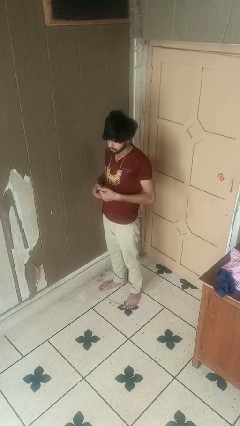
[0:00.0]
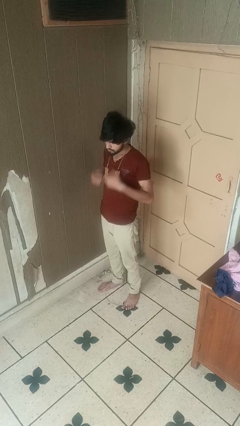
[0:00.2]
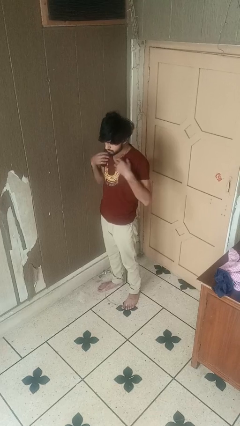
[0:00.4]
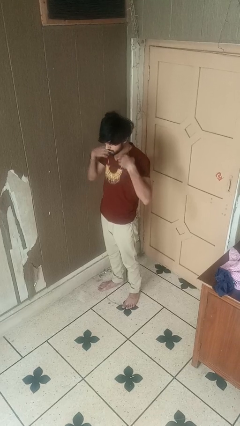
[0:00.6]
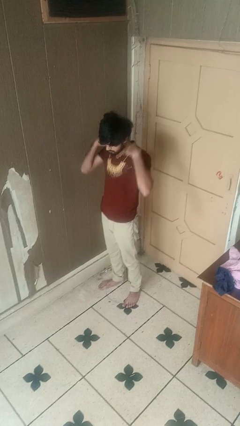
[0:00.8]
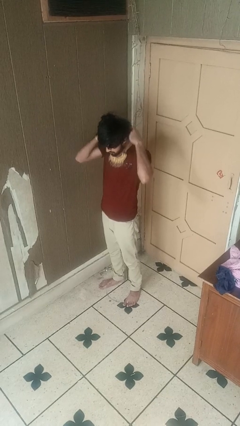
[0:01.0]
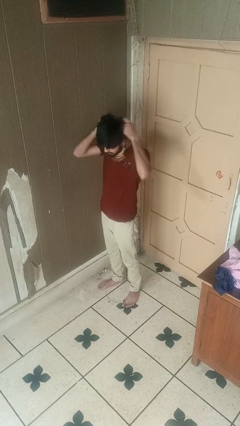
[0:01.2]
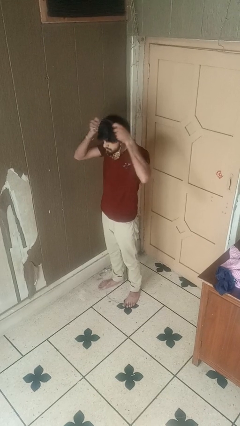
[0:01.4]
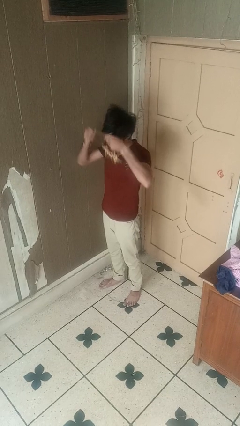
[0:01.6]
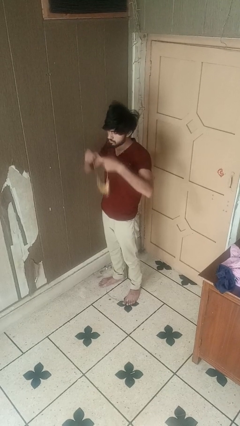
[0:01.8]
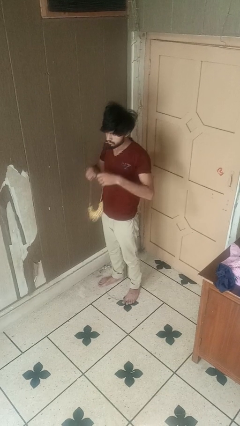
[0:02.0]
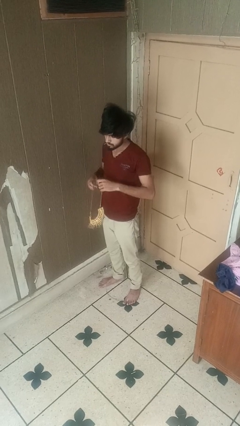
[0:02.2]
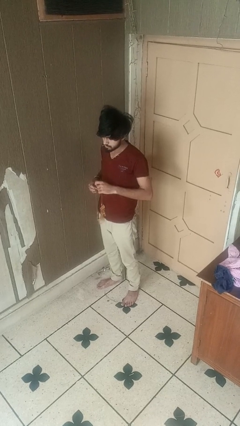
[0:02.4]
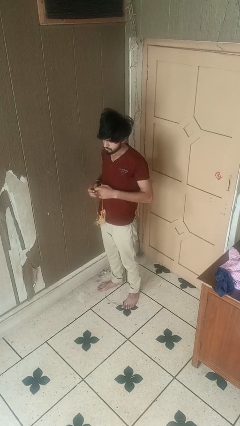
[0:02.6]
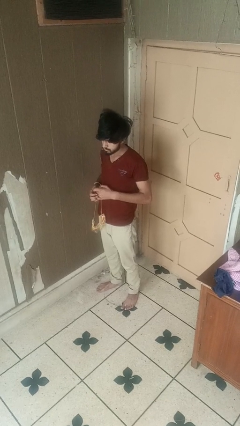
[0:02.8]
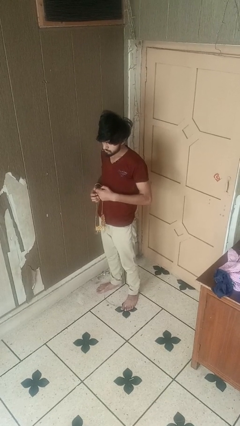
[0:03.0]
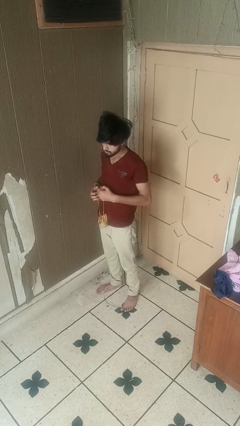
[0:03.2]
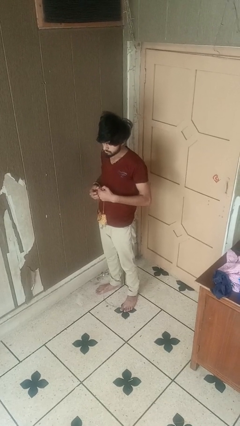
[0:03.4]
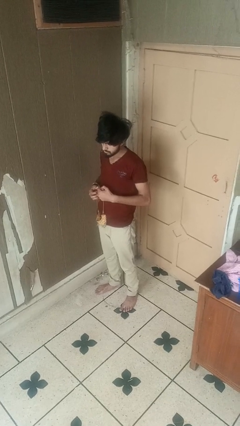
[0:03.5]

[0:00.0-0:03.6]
person takes off necklace

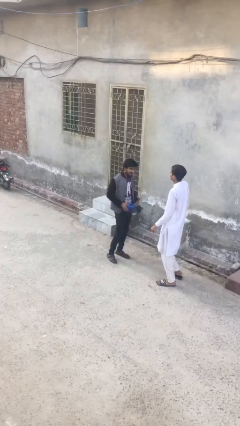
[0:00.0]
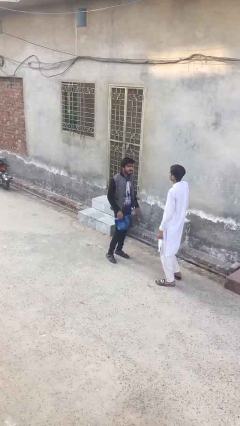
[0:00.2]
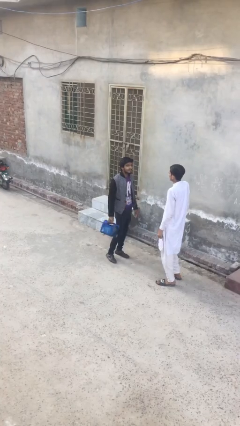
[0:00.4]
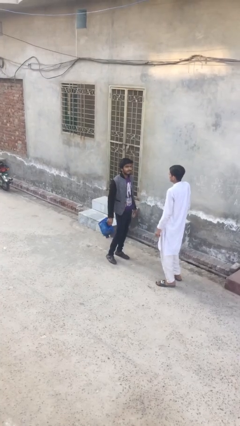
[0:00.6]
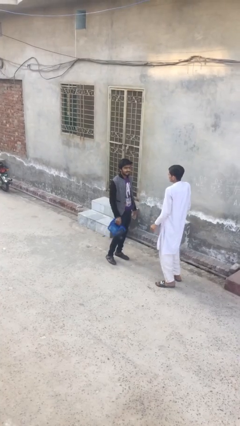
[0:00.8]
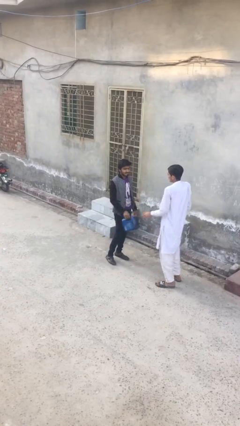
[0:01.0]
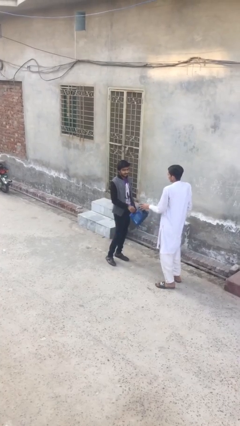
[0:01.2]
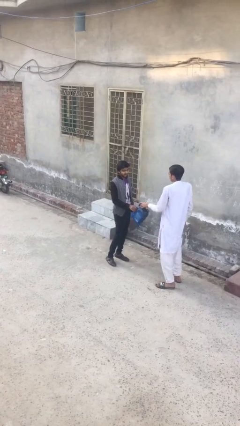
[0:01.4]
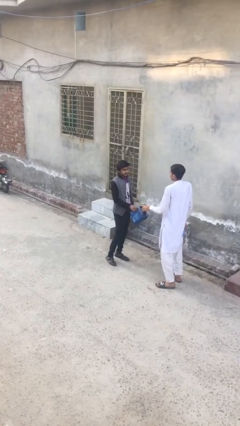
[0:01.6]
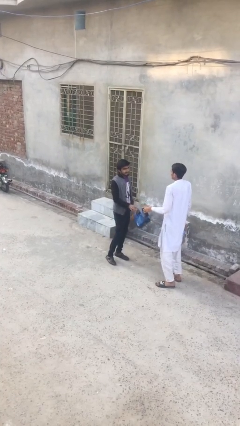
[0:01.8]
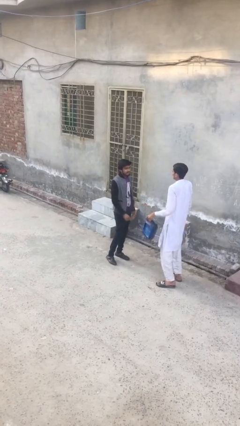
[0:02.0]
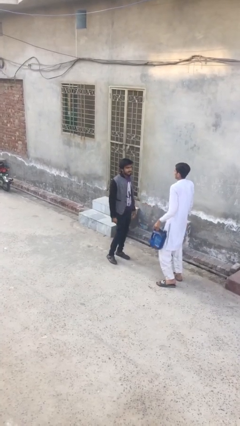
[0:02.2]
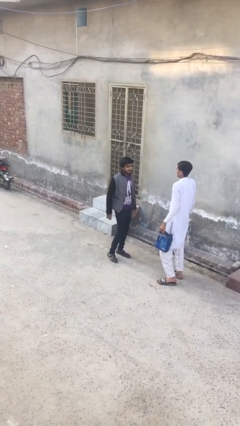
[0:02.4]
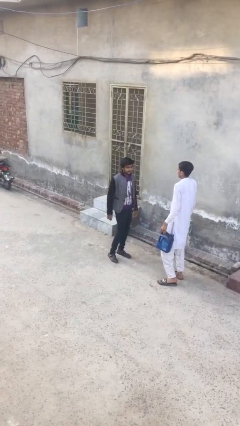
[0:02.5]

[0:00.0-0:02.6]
person transfers object to person

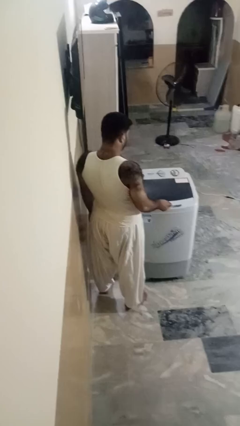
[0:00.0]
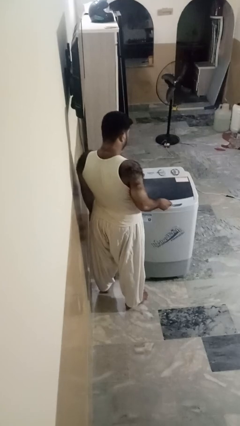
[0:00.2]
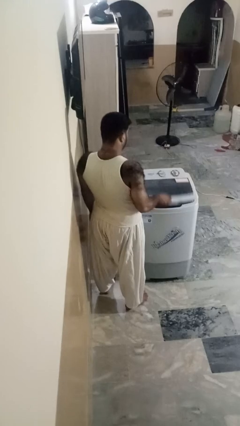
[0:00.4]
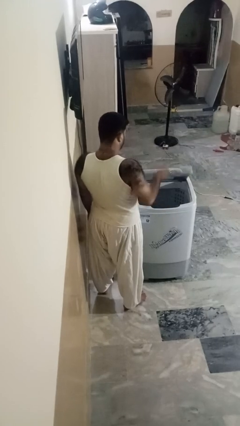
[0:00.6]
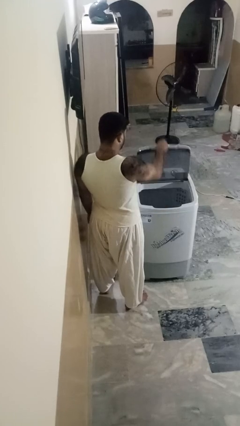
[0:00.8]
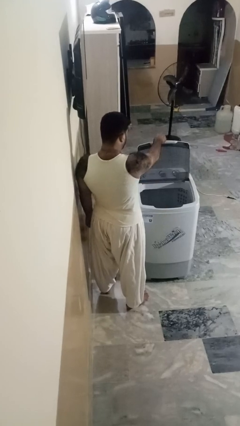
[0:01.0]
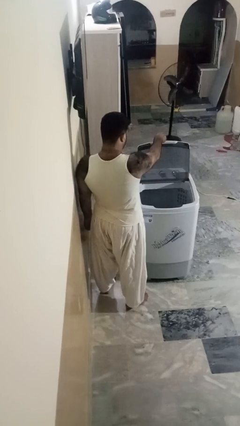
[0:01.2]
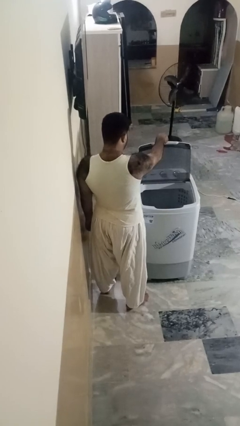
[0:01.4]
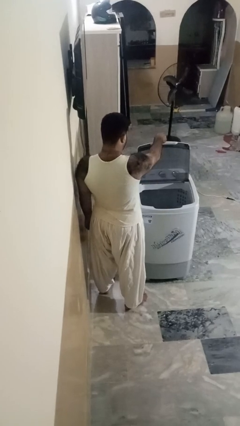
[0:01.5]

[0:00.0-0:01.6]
person opens clothes washer

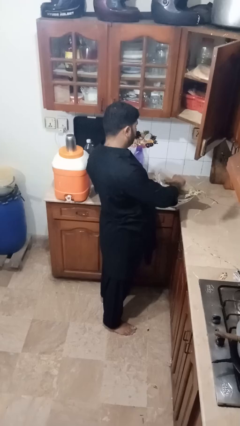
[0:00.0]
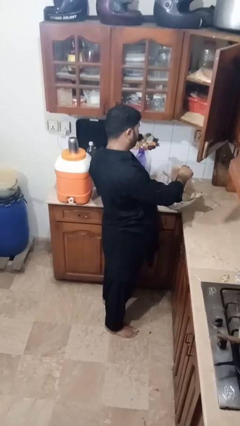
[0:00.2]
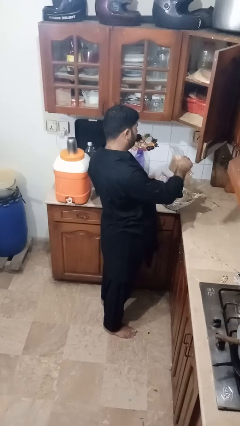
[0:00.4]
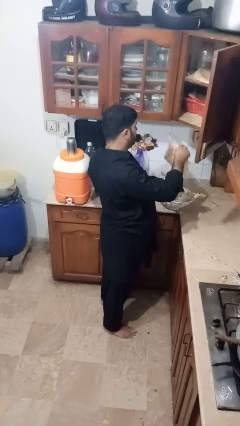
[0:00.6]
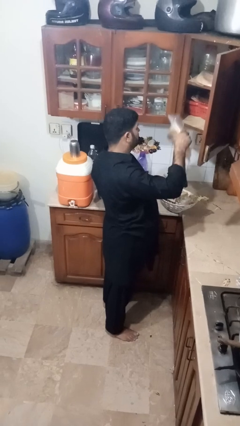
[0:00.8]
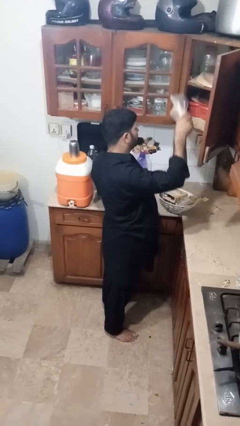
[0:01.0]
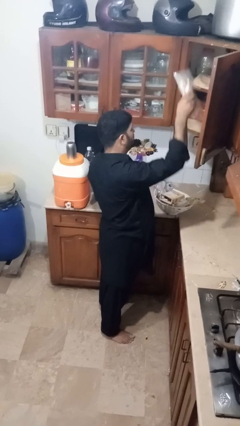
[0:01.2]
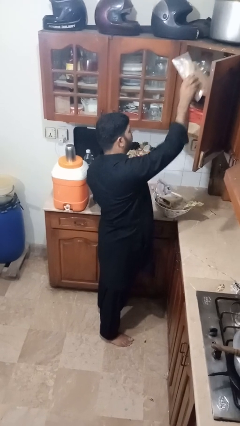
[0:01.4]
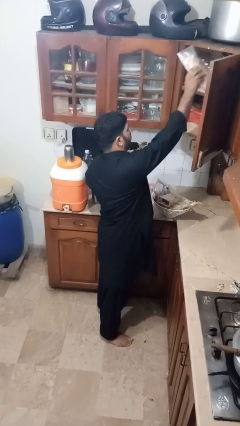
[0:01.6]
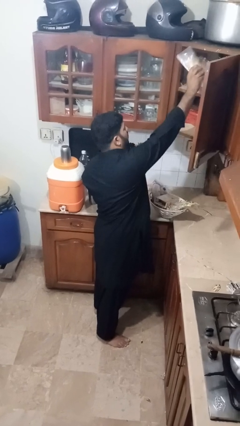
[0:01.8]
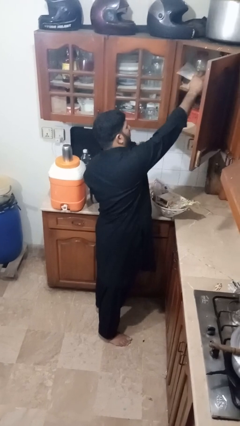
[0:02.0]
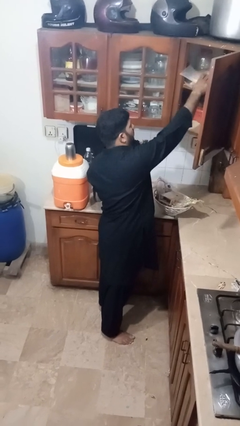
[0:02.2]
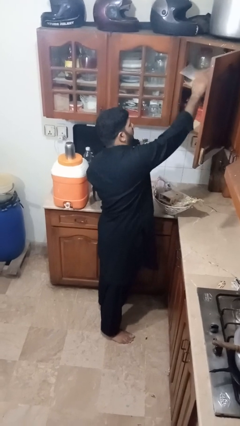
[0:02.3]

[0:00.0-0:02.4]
person loads groceries into cabinet

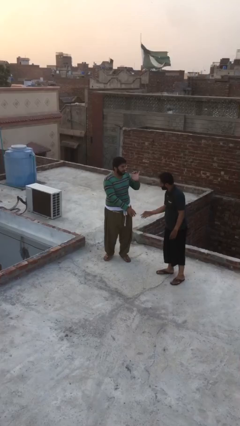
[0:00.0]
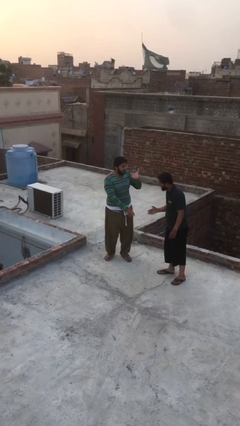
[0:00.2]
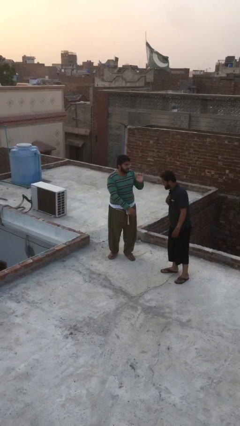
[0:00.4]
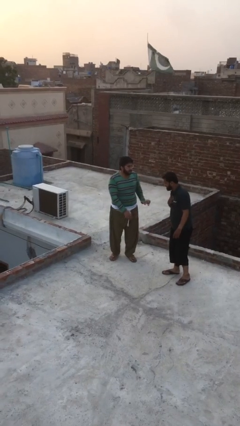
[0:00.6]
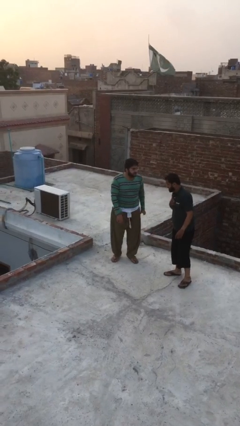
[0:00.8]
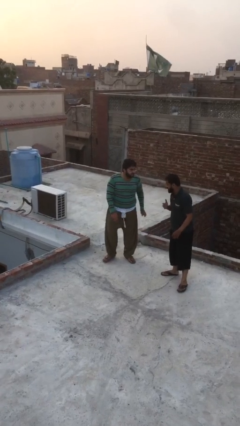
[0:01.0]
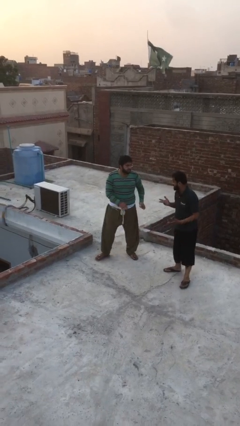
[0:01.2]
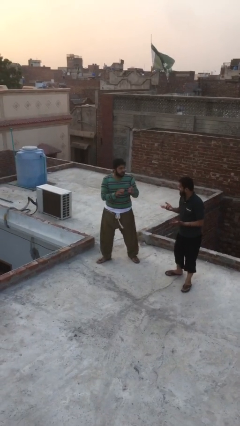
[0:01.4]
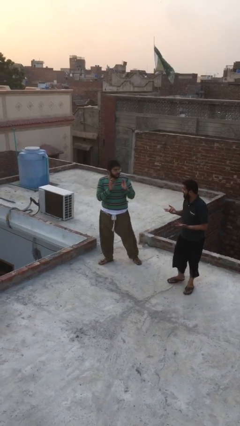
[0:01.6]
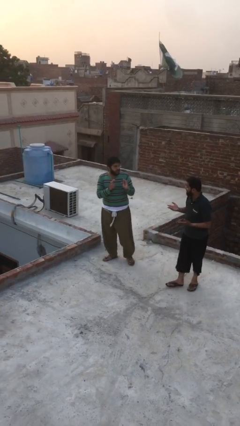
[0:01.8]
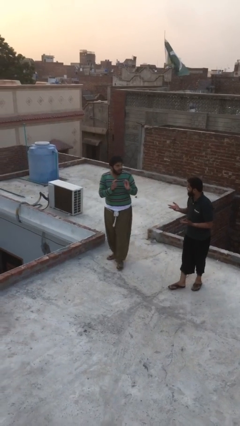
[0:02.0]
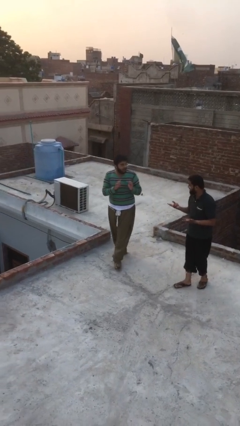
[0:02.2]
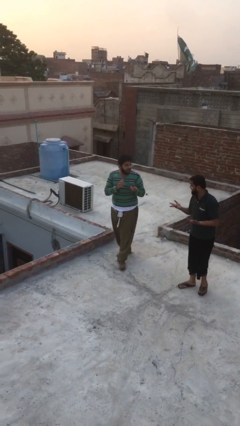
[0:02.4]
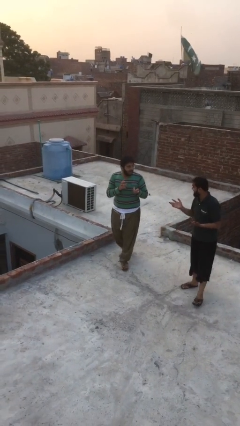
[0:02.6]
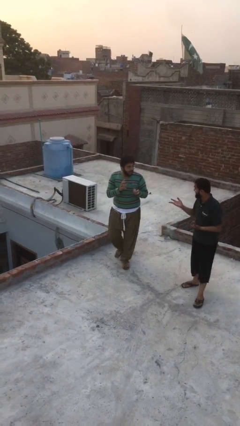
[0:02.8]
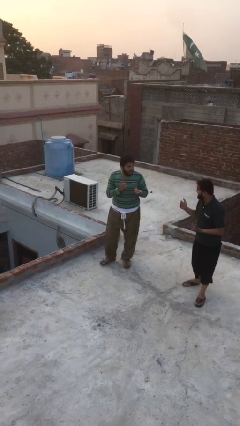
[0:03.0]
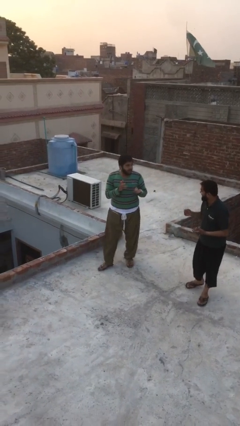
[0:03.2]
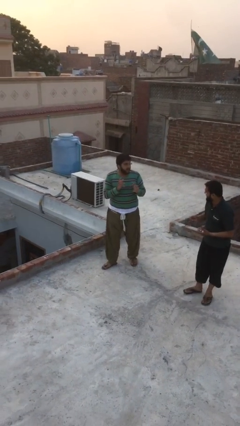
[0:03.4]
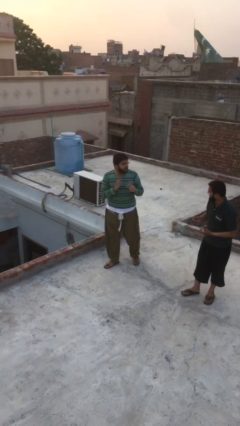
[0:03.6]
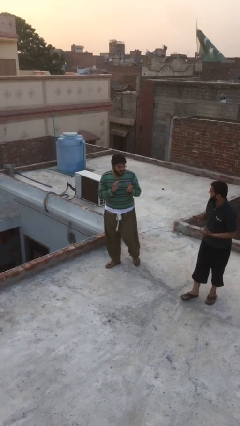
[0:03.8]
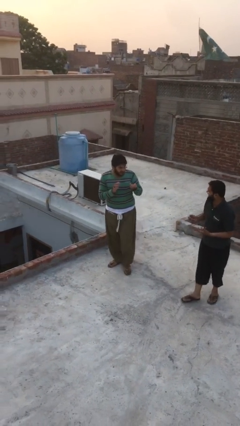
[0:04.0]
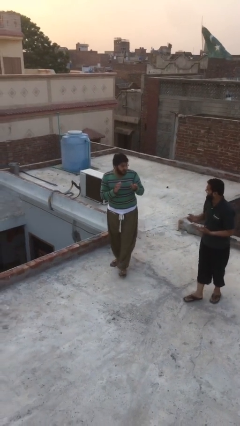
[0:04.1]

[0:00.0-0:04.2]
person talks to person

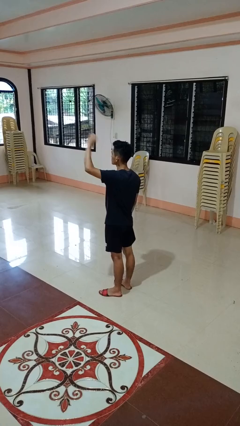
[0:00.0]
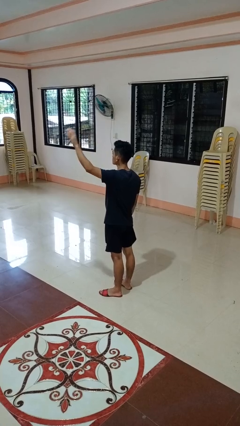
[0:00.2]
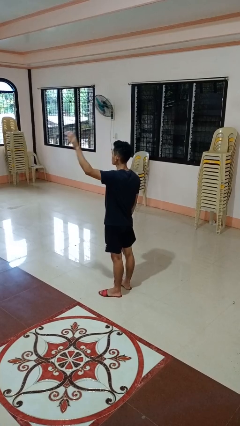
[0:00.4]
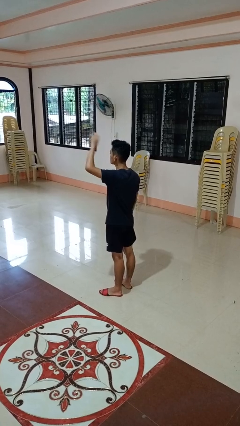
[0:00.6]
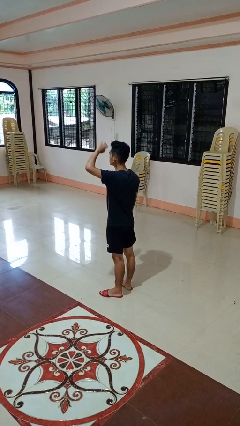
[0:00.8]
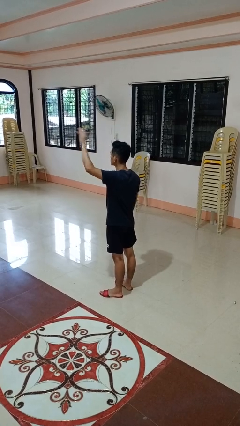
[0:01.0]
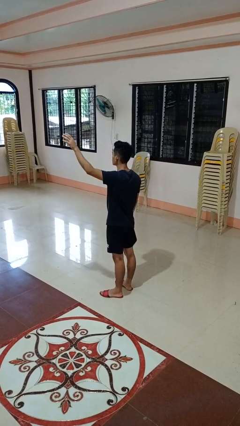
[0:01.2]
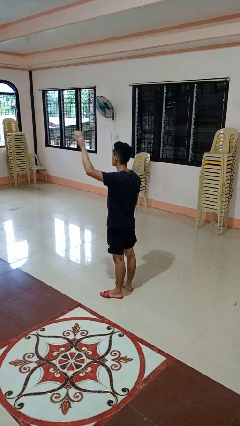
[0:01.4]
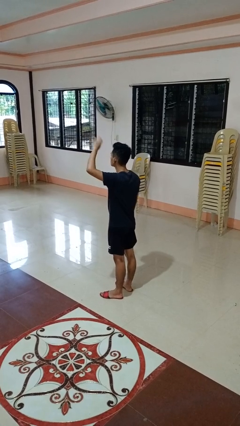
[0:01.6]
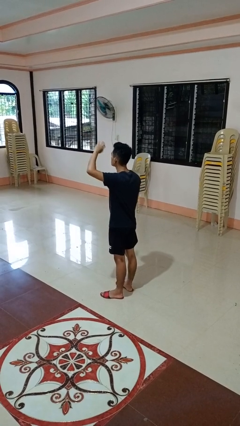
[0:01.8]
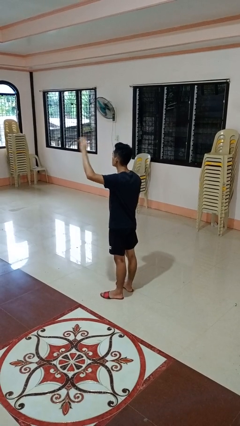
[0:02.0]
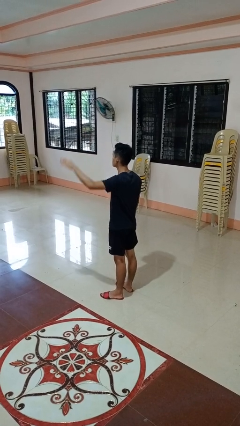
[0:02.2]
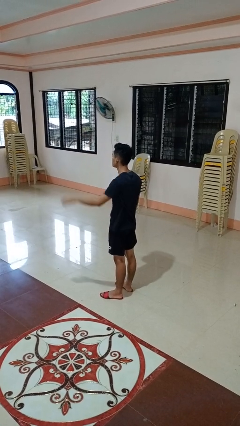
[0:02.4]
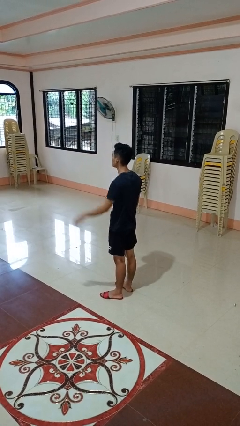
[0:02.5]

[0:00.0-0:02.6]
person waves at person

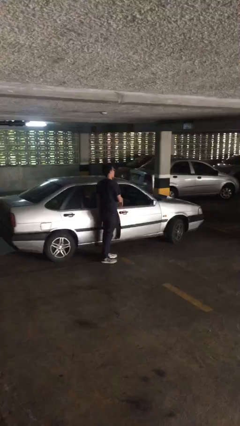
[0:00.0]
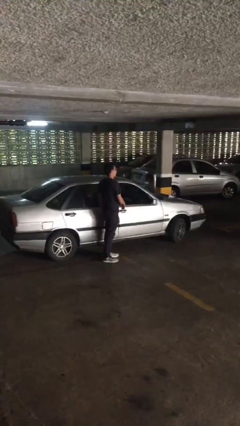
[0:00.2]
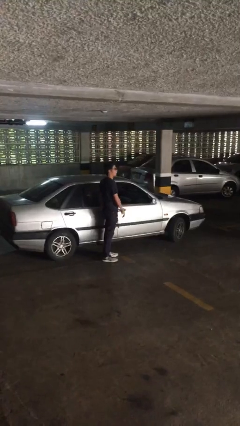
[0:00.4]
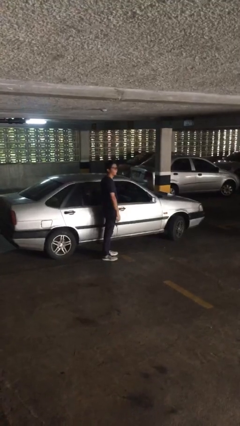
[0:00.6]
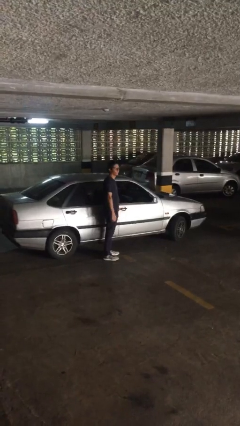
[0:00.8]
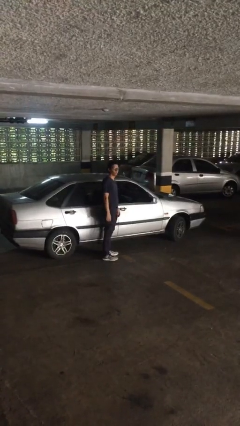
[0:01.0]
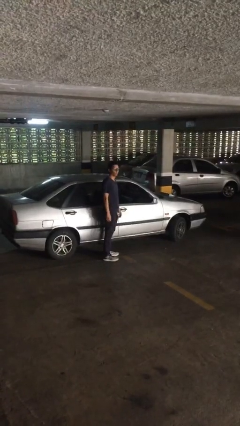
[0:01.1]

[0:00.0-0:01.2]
person closes car door
